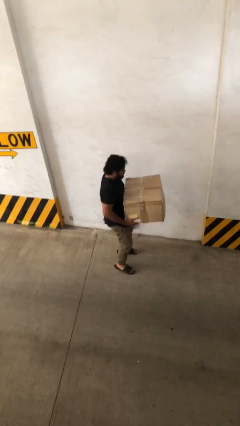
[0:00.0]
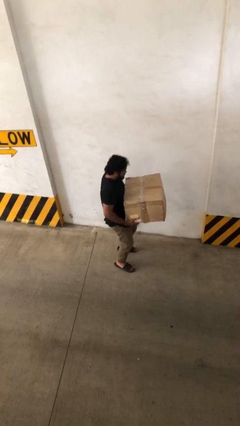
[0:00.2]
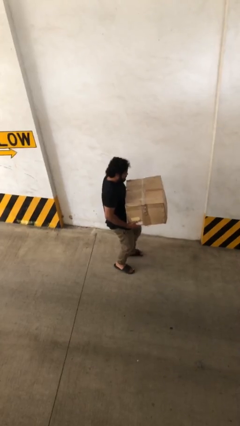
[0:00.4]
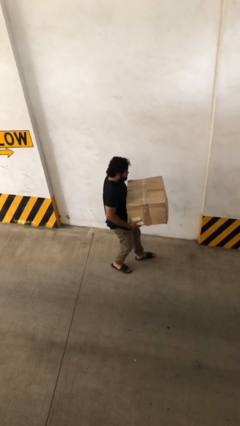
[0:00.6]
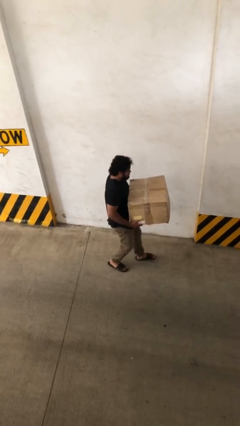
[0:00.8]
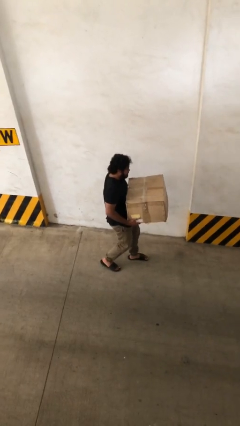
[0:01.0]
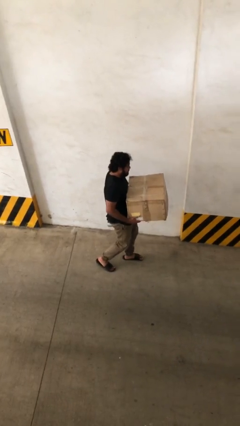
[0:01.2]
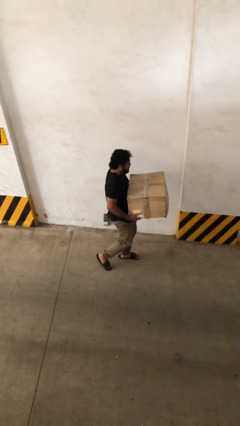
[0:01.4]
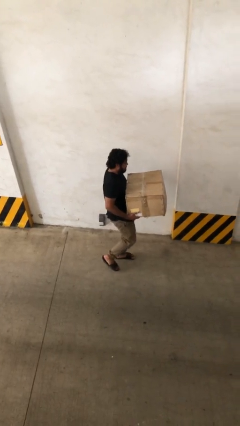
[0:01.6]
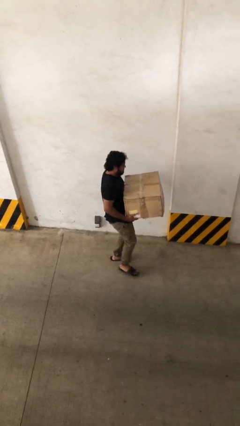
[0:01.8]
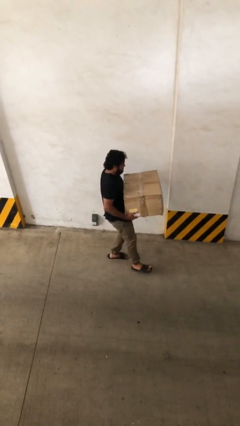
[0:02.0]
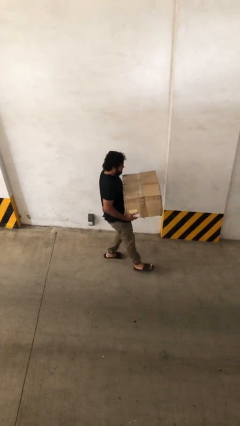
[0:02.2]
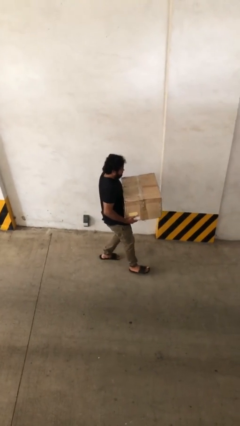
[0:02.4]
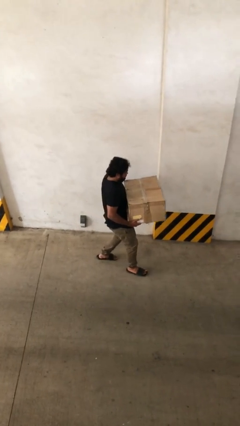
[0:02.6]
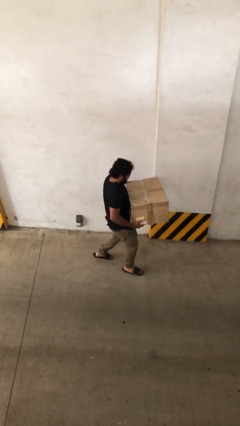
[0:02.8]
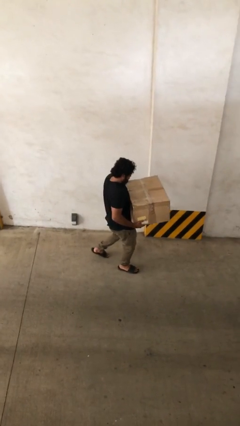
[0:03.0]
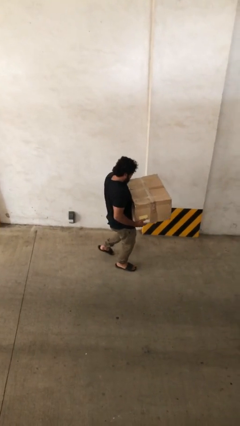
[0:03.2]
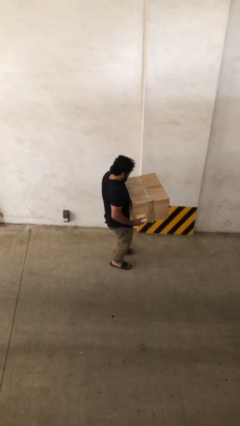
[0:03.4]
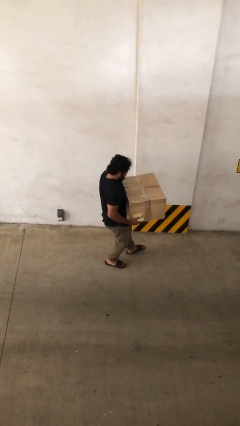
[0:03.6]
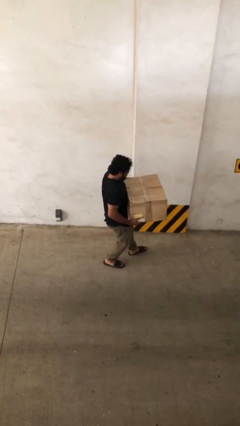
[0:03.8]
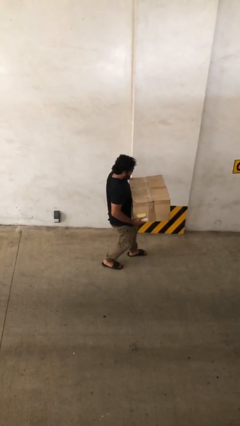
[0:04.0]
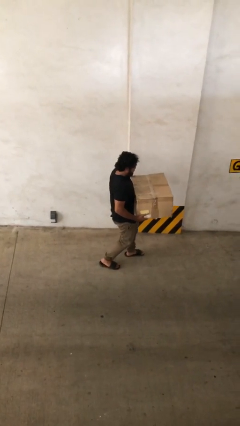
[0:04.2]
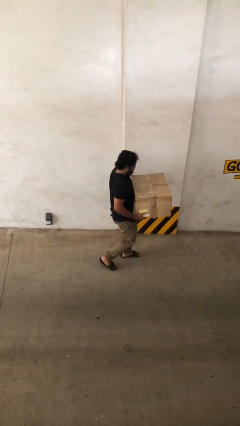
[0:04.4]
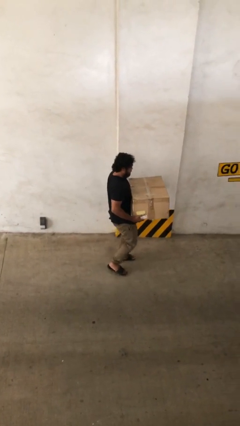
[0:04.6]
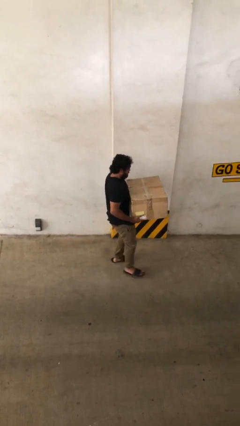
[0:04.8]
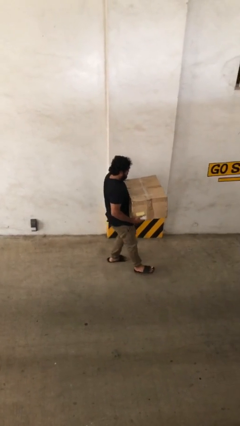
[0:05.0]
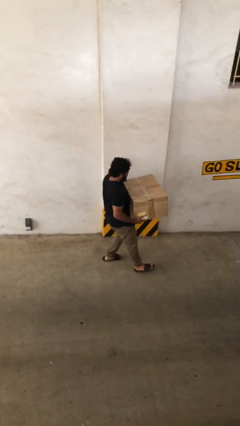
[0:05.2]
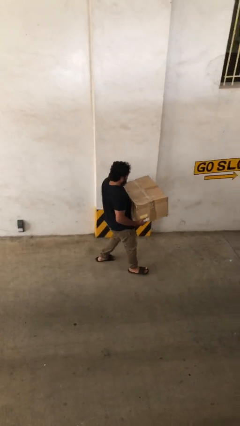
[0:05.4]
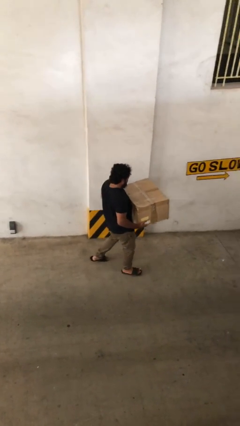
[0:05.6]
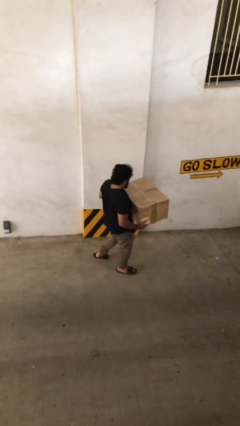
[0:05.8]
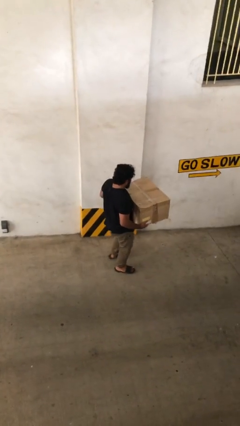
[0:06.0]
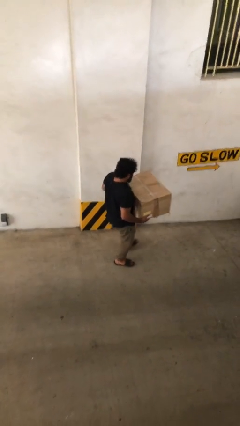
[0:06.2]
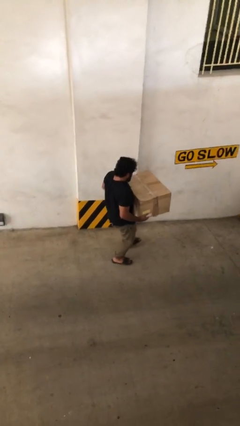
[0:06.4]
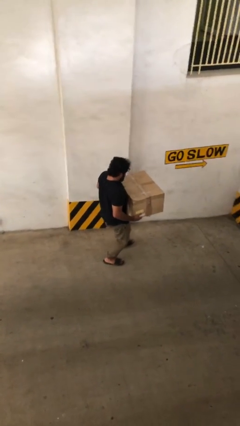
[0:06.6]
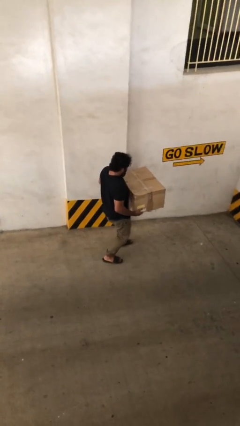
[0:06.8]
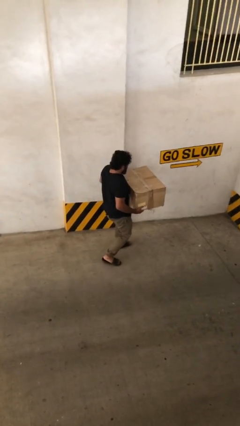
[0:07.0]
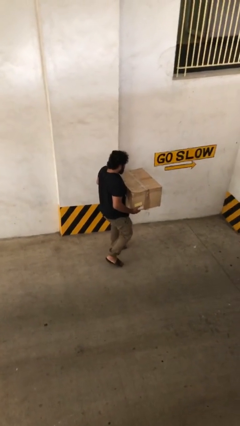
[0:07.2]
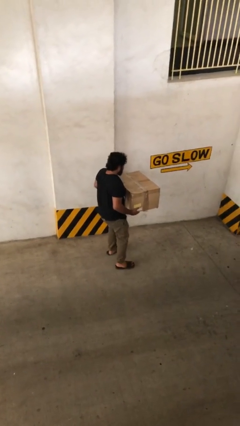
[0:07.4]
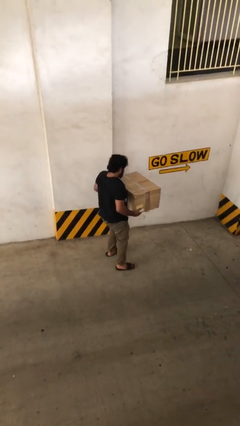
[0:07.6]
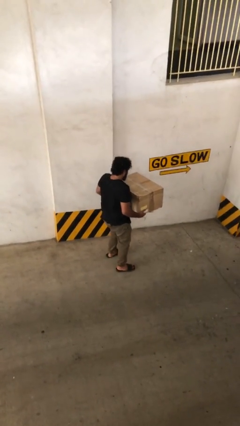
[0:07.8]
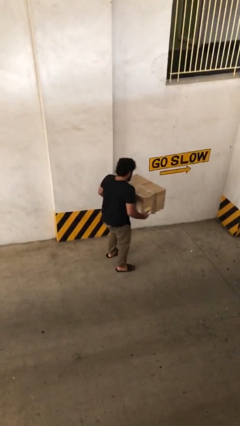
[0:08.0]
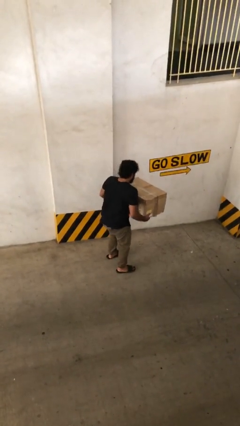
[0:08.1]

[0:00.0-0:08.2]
person carries heavy object

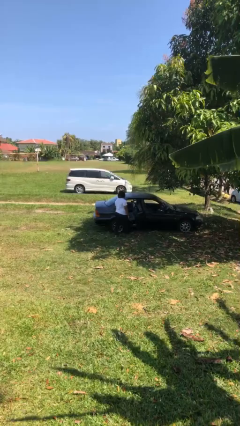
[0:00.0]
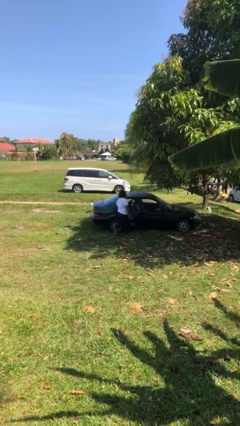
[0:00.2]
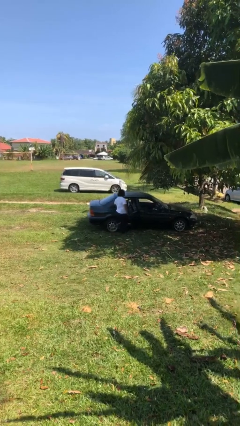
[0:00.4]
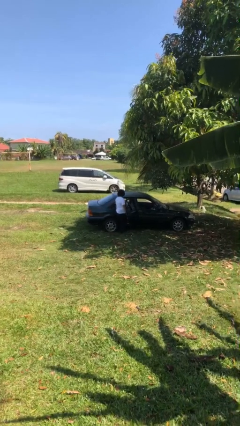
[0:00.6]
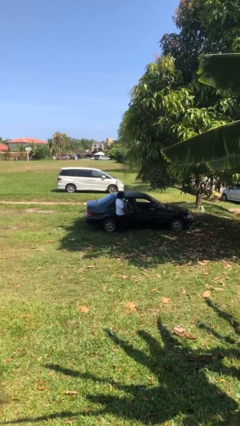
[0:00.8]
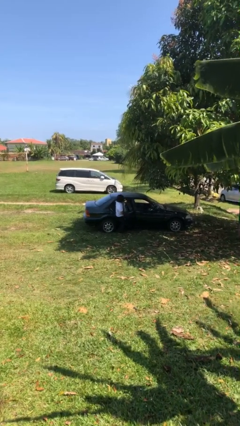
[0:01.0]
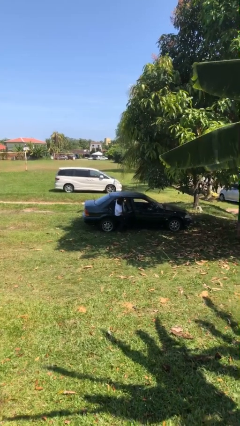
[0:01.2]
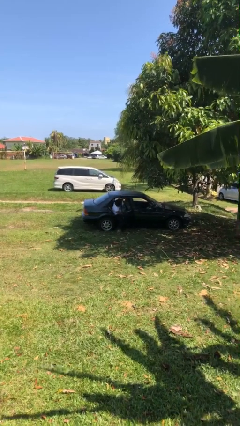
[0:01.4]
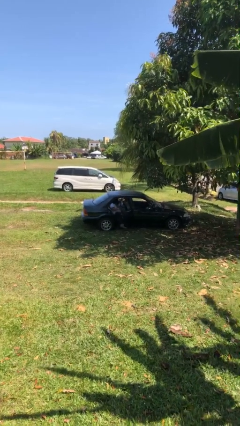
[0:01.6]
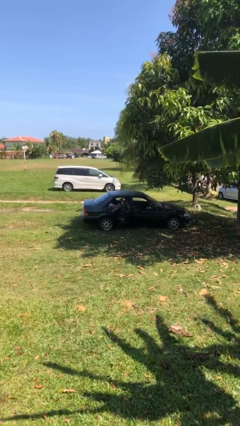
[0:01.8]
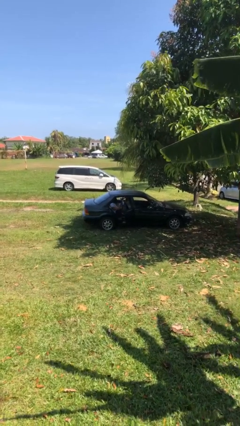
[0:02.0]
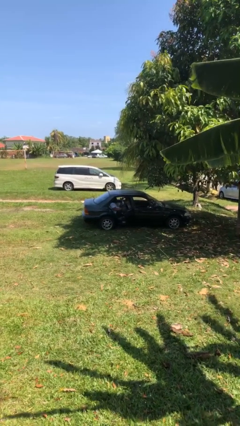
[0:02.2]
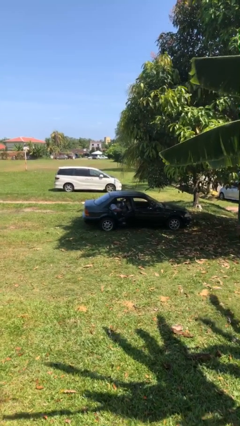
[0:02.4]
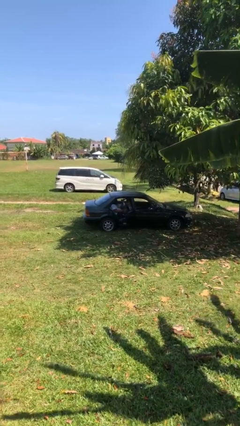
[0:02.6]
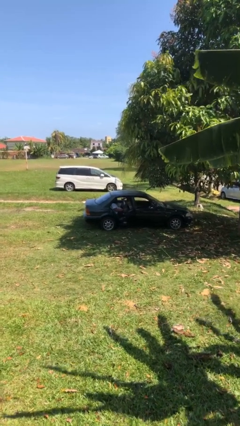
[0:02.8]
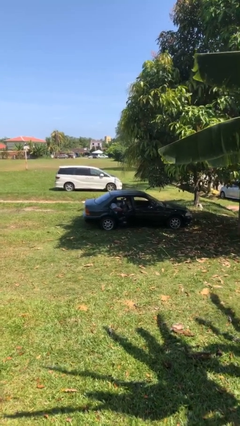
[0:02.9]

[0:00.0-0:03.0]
person enters car

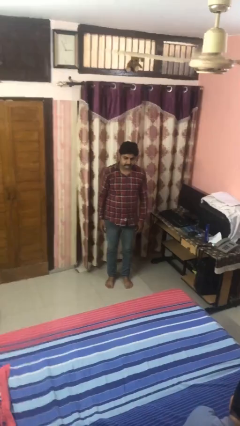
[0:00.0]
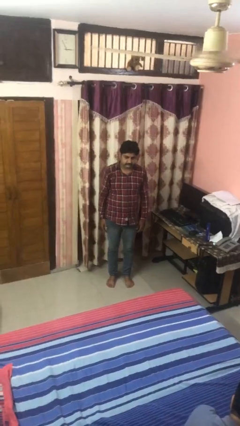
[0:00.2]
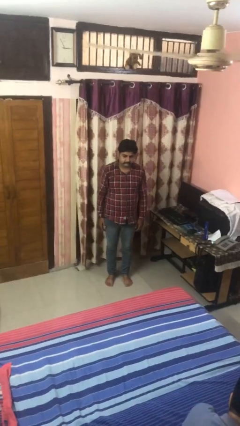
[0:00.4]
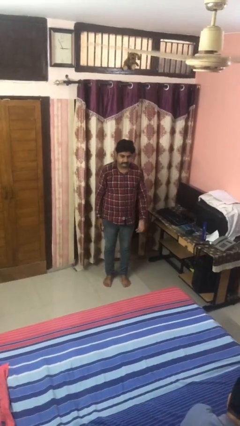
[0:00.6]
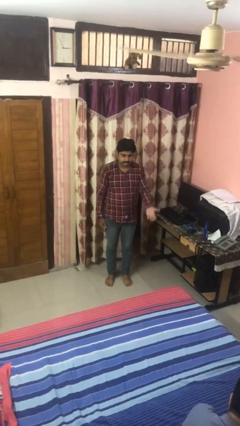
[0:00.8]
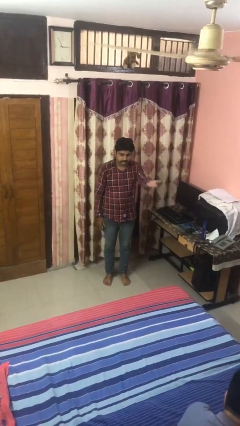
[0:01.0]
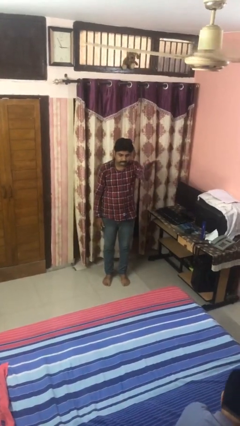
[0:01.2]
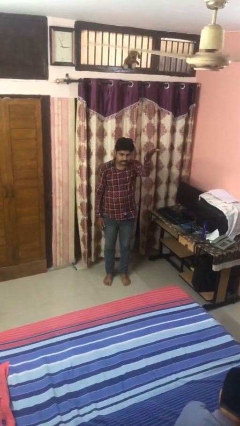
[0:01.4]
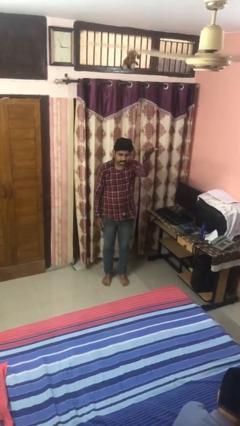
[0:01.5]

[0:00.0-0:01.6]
person gestures swipe up

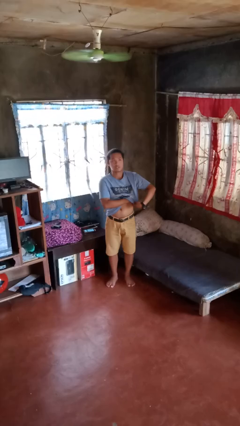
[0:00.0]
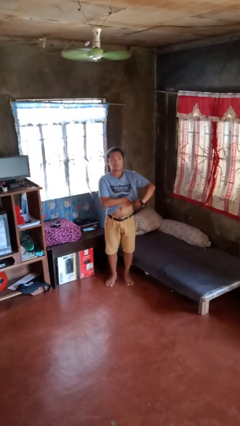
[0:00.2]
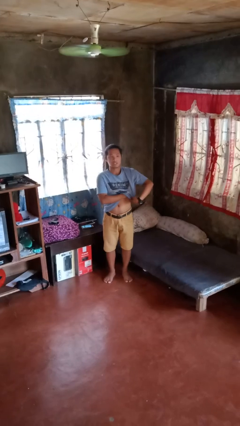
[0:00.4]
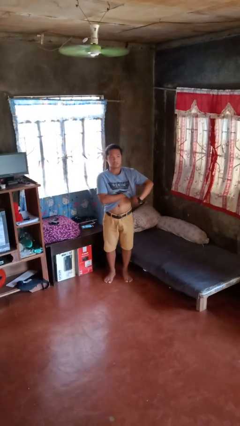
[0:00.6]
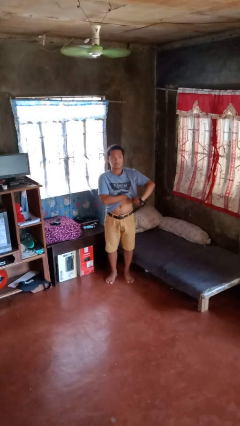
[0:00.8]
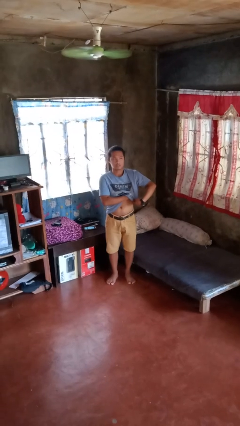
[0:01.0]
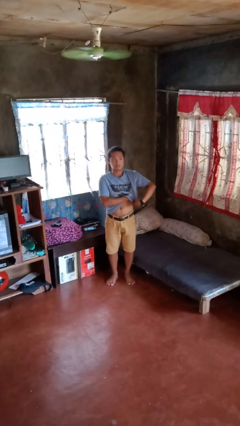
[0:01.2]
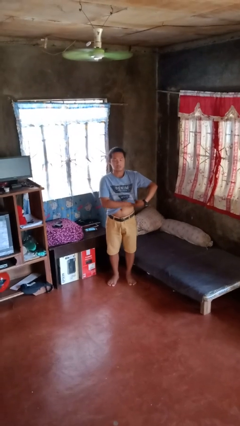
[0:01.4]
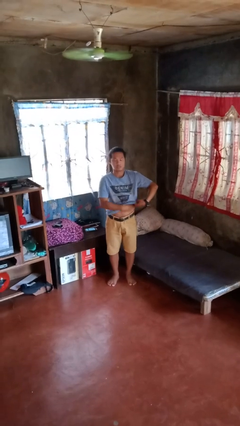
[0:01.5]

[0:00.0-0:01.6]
person applies deodorant

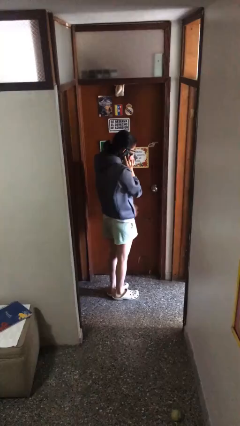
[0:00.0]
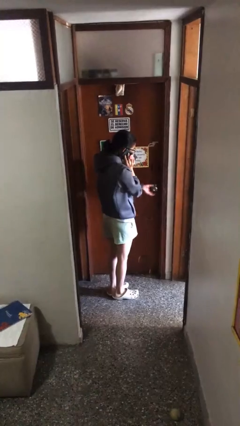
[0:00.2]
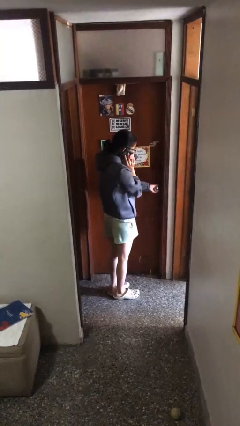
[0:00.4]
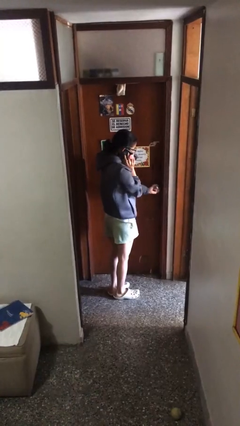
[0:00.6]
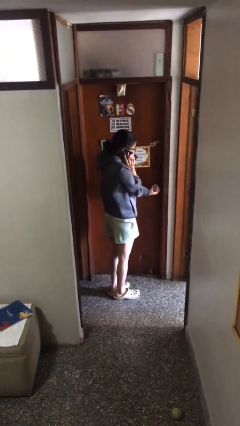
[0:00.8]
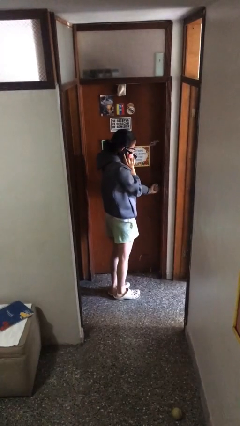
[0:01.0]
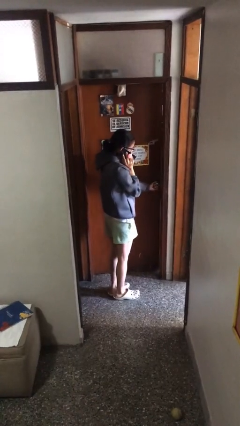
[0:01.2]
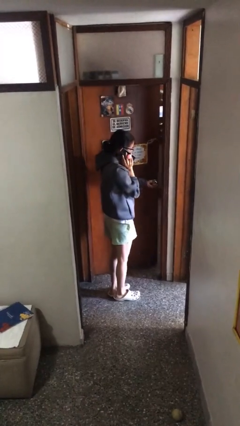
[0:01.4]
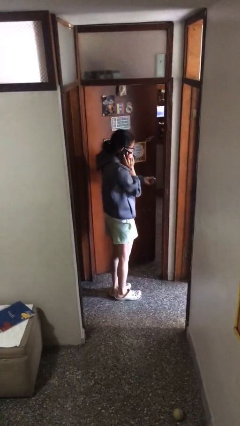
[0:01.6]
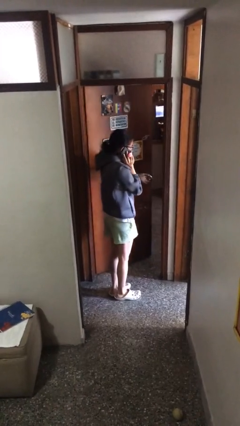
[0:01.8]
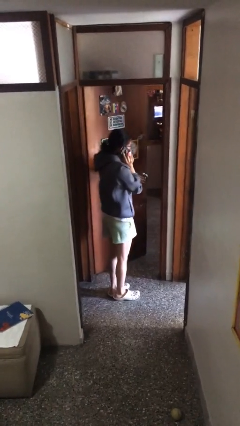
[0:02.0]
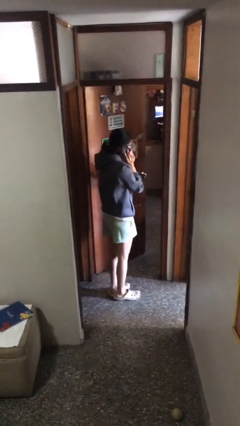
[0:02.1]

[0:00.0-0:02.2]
person opens facility door

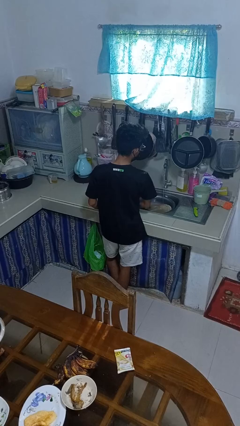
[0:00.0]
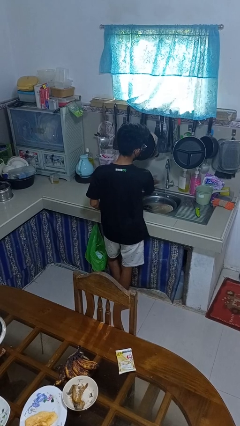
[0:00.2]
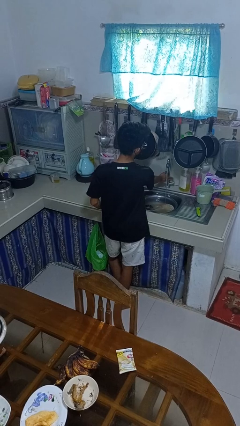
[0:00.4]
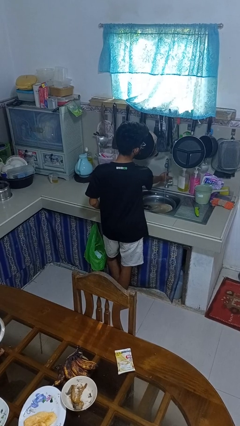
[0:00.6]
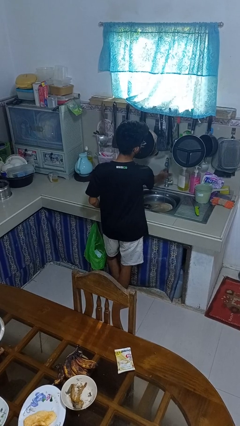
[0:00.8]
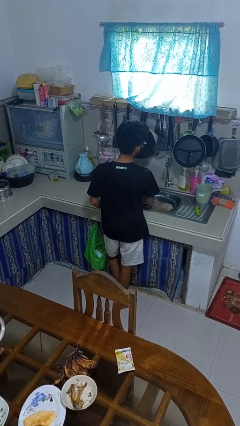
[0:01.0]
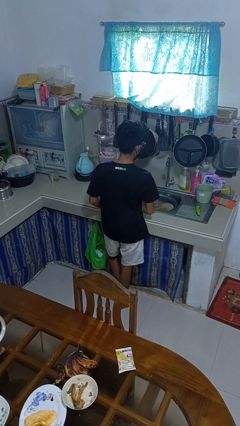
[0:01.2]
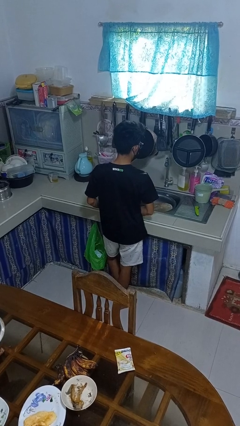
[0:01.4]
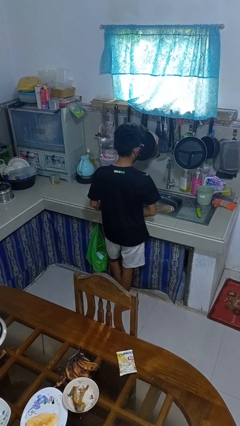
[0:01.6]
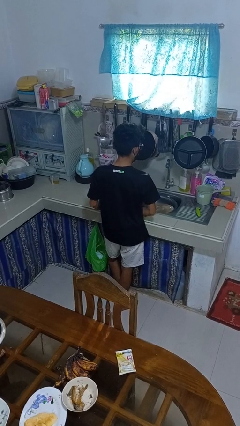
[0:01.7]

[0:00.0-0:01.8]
person turns off faucet
